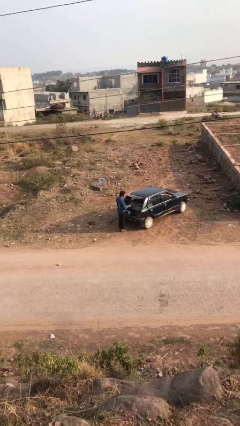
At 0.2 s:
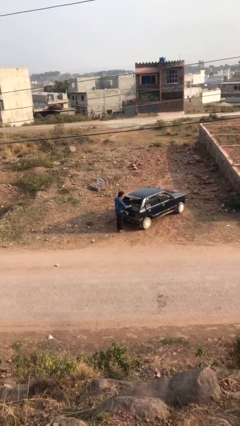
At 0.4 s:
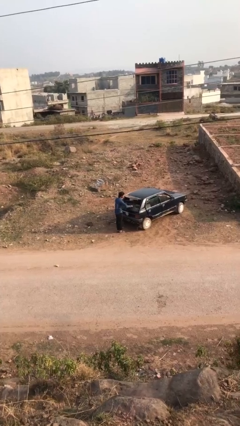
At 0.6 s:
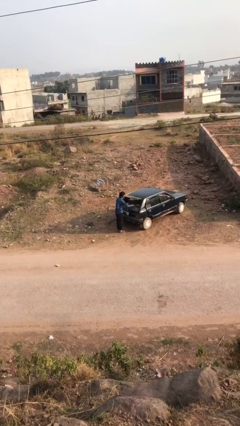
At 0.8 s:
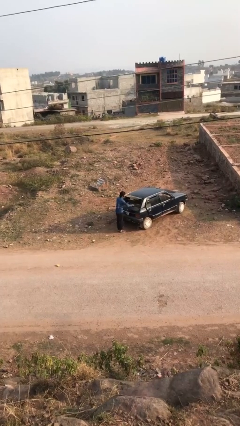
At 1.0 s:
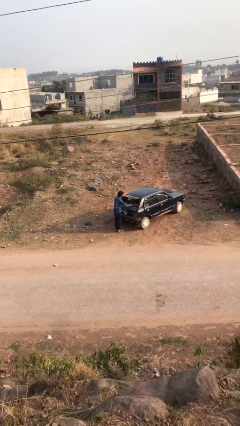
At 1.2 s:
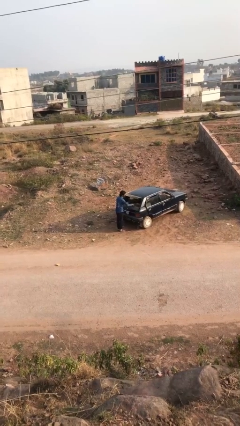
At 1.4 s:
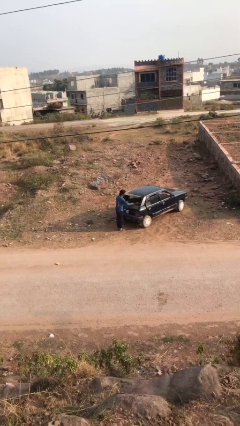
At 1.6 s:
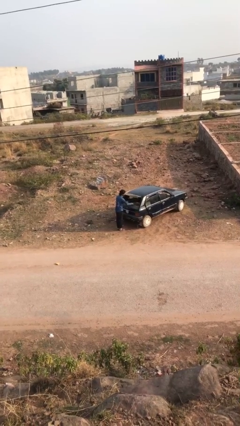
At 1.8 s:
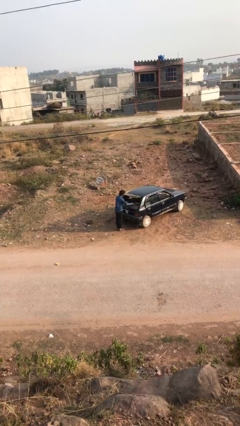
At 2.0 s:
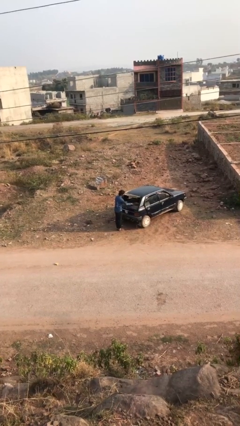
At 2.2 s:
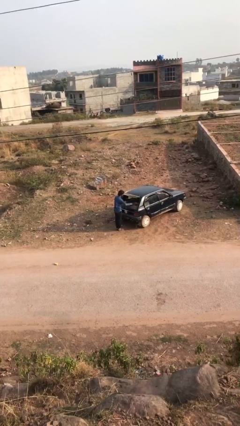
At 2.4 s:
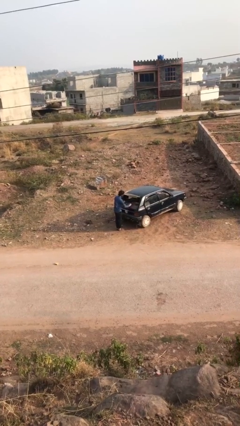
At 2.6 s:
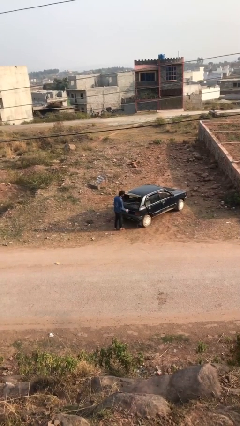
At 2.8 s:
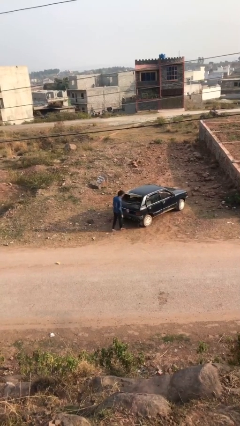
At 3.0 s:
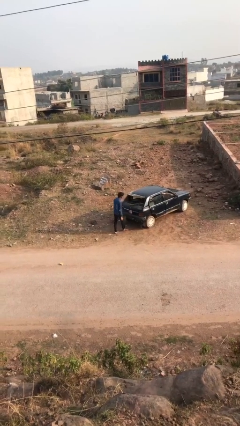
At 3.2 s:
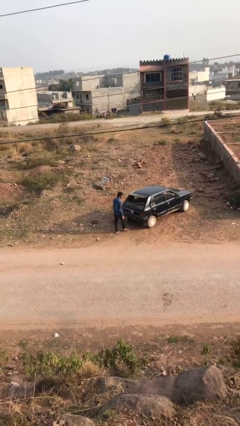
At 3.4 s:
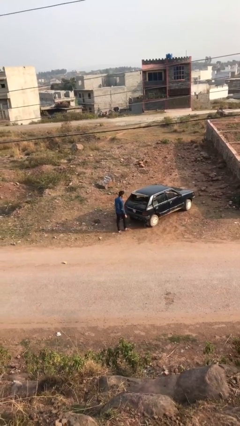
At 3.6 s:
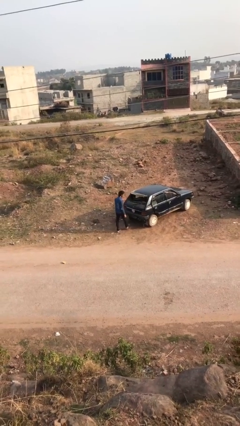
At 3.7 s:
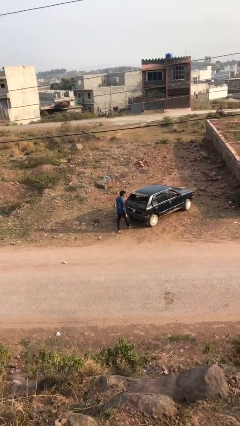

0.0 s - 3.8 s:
person loads car

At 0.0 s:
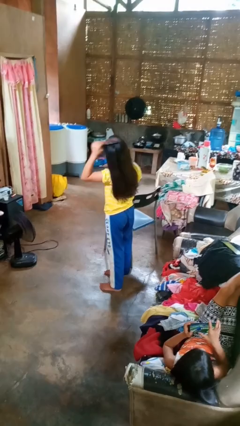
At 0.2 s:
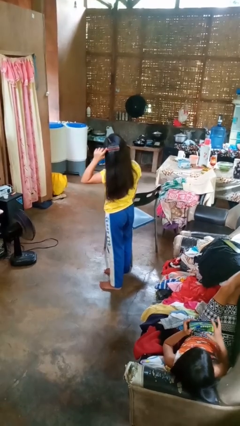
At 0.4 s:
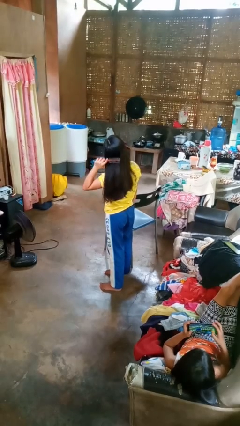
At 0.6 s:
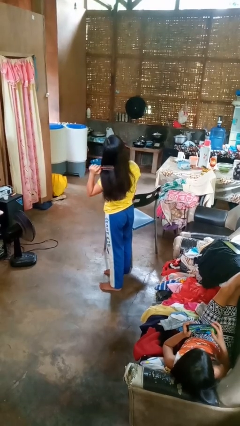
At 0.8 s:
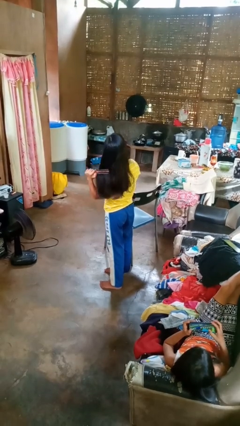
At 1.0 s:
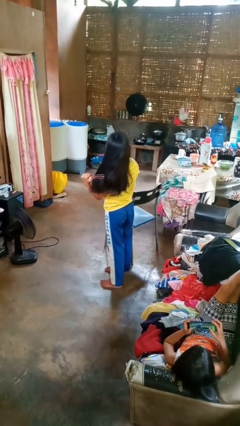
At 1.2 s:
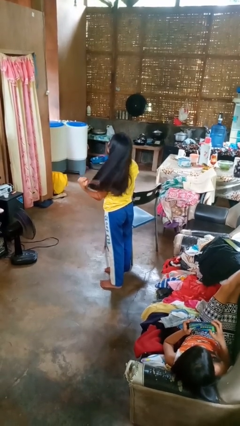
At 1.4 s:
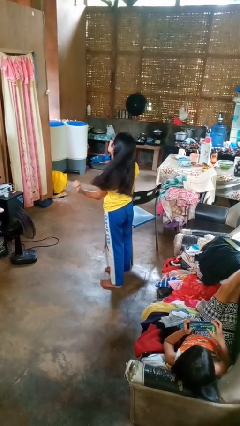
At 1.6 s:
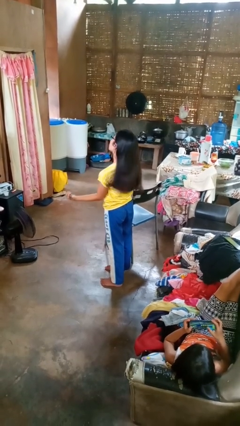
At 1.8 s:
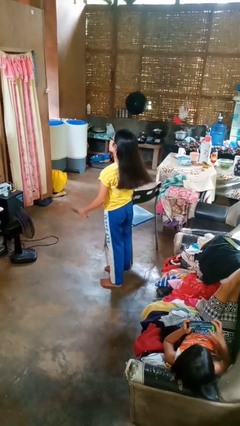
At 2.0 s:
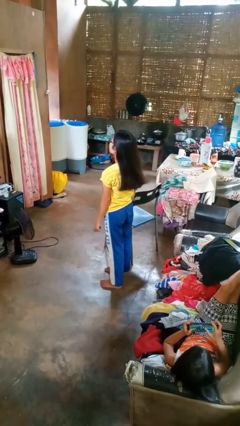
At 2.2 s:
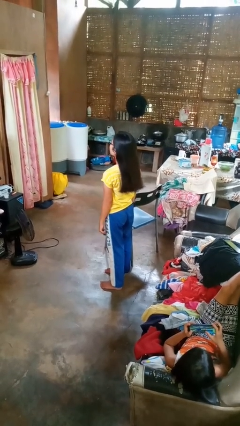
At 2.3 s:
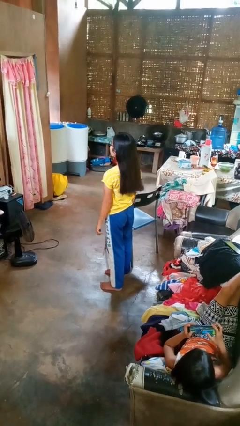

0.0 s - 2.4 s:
person brushes hair

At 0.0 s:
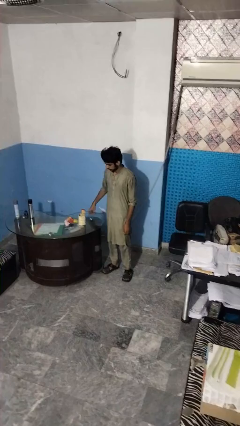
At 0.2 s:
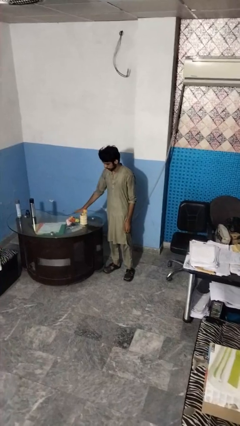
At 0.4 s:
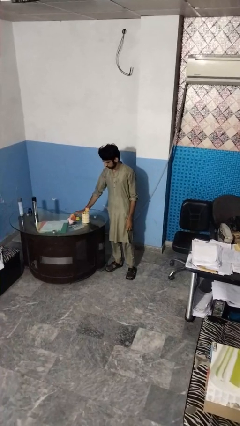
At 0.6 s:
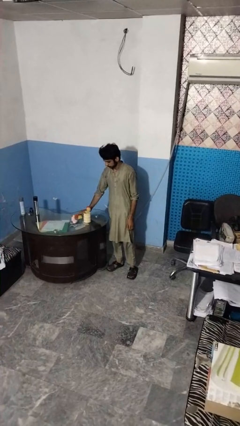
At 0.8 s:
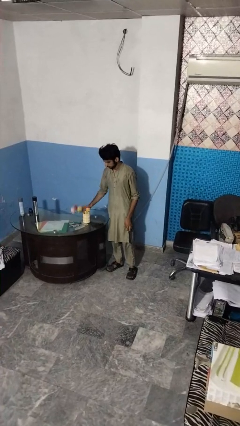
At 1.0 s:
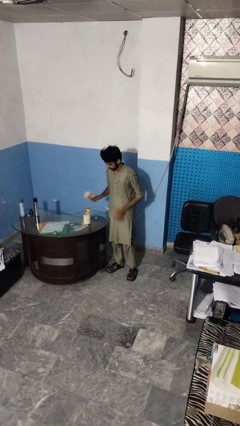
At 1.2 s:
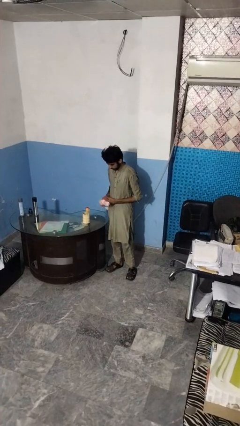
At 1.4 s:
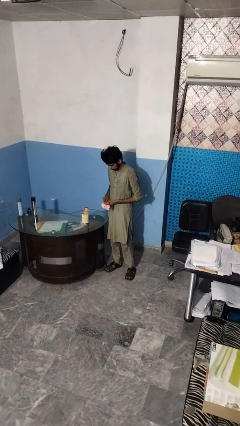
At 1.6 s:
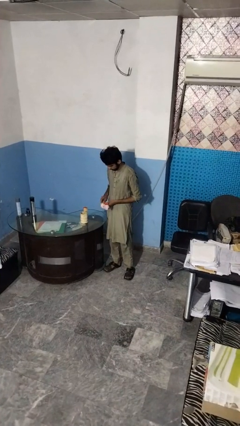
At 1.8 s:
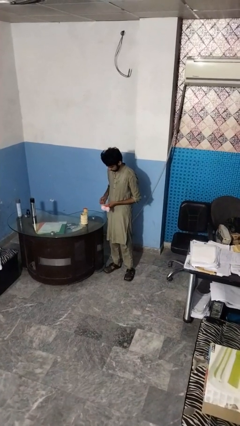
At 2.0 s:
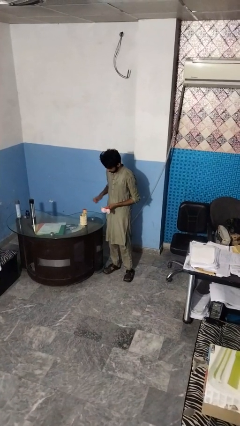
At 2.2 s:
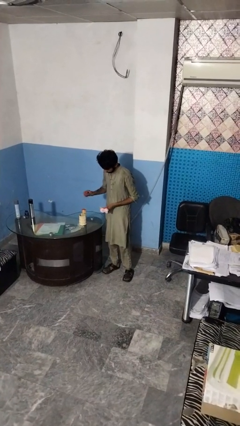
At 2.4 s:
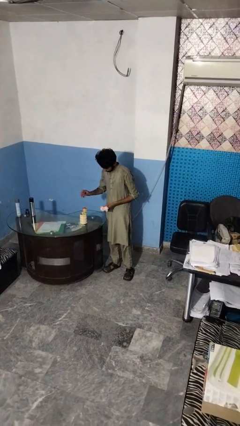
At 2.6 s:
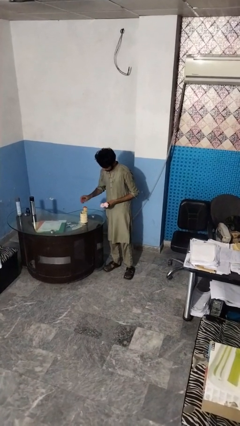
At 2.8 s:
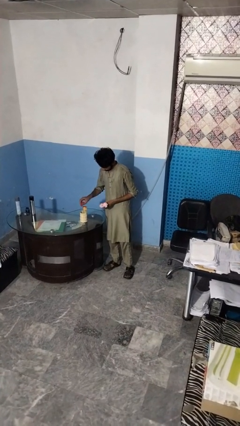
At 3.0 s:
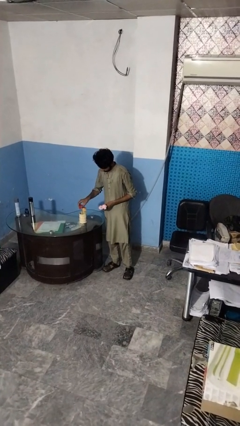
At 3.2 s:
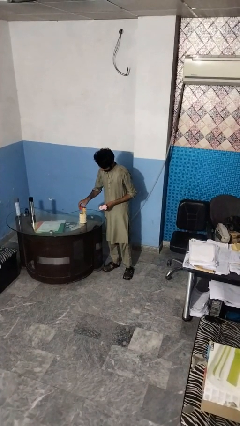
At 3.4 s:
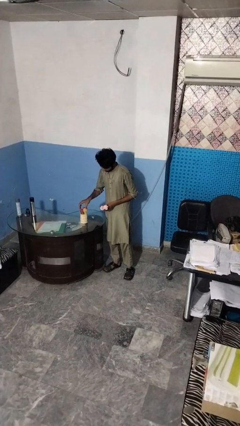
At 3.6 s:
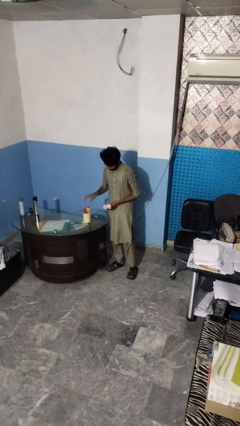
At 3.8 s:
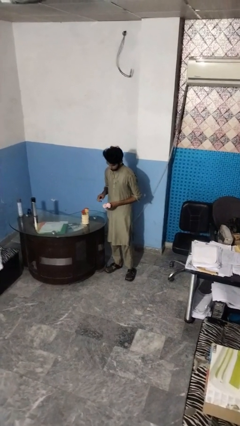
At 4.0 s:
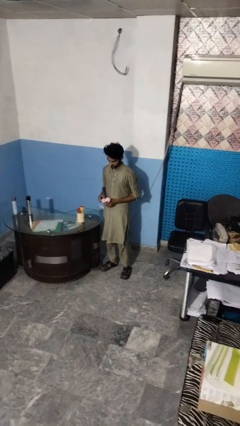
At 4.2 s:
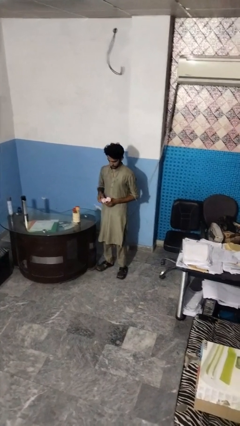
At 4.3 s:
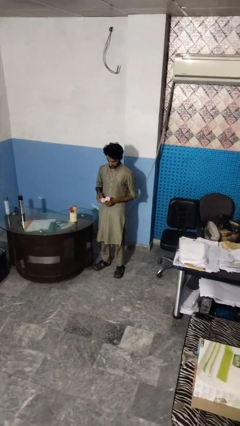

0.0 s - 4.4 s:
person arranges flowers in vase

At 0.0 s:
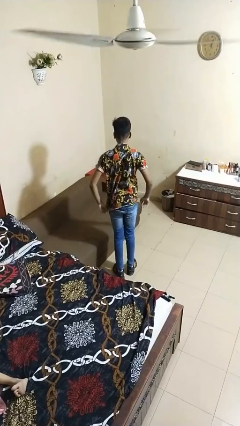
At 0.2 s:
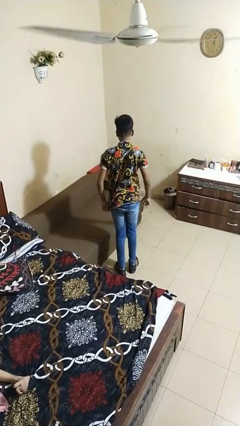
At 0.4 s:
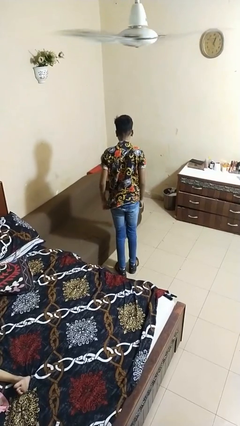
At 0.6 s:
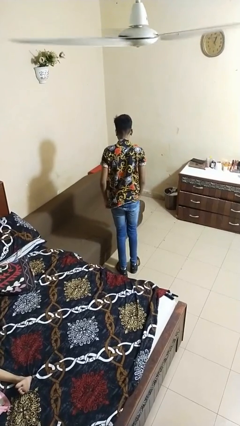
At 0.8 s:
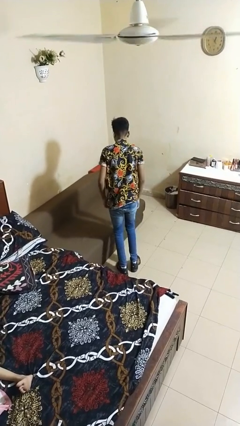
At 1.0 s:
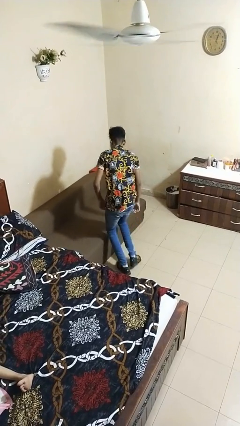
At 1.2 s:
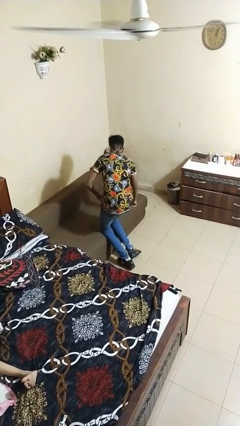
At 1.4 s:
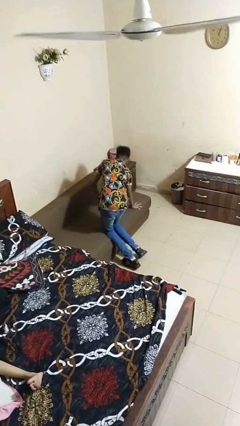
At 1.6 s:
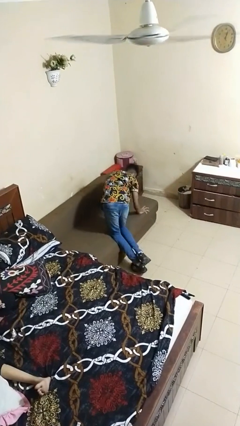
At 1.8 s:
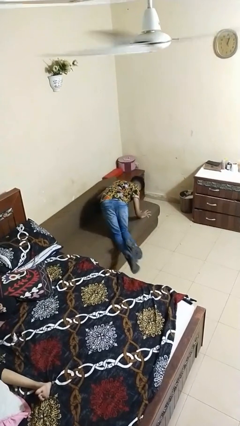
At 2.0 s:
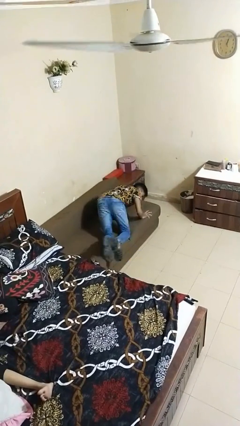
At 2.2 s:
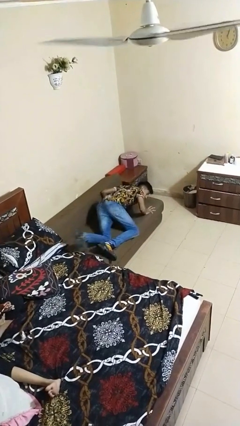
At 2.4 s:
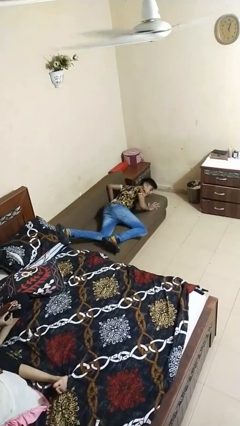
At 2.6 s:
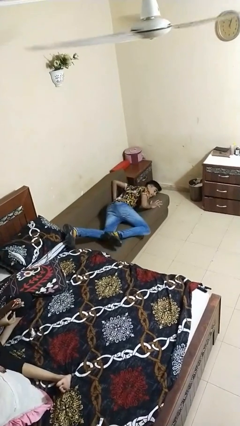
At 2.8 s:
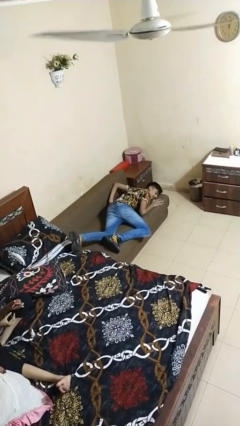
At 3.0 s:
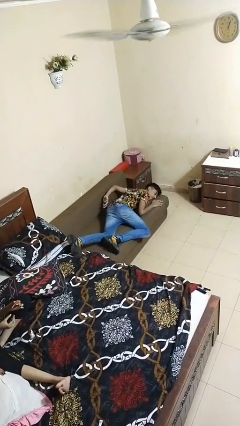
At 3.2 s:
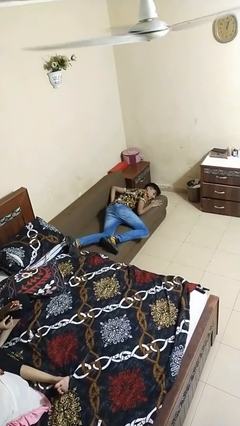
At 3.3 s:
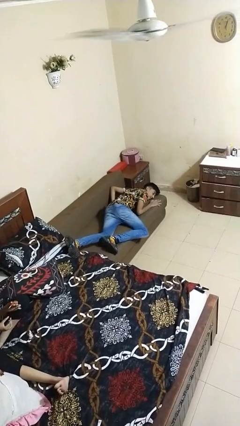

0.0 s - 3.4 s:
person lies down on bed

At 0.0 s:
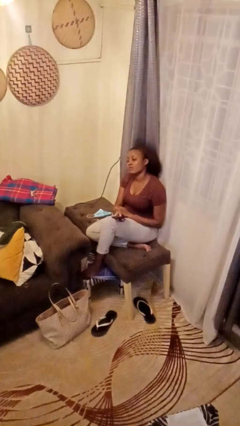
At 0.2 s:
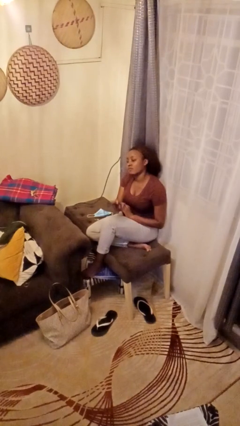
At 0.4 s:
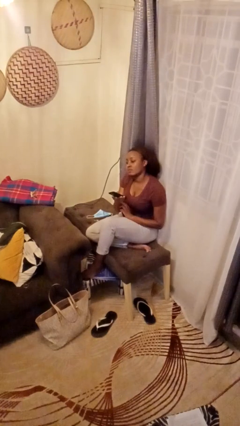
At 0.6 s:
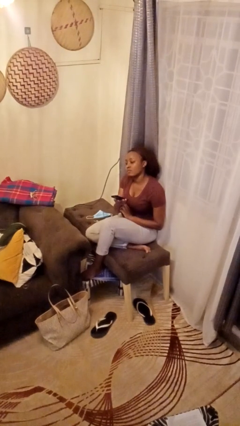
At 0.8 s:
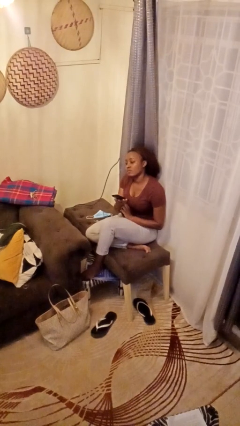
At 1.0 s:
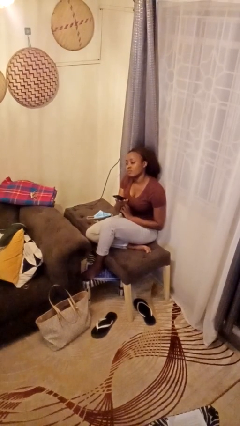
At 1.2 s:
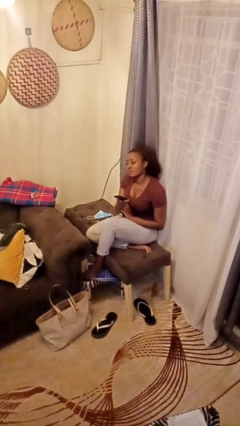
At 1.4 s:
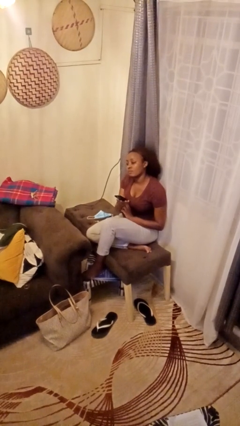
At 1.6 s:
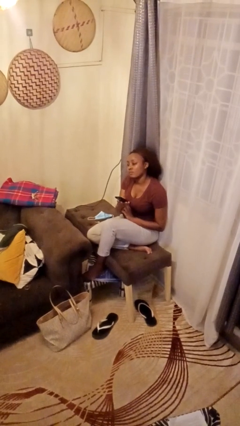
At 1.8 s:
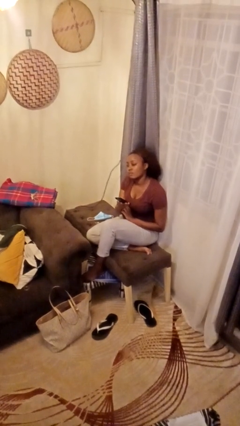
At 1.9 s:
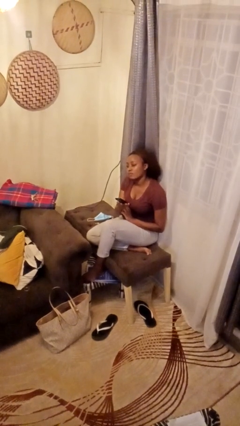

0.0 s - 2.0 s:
person uses television remote

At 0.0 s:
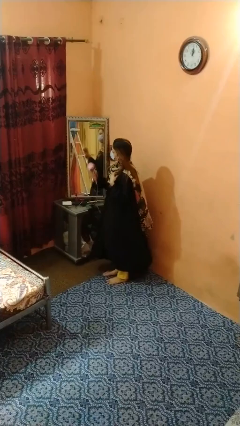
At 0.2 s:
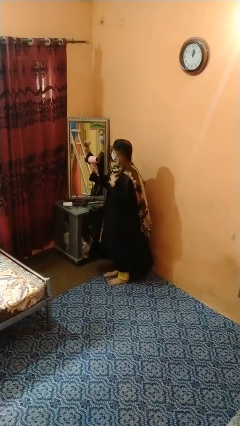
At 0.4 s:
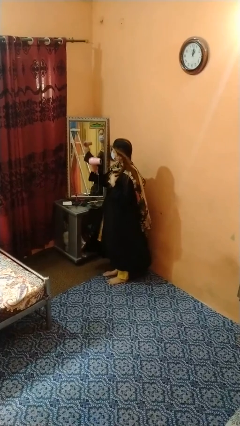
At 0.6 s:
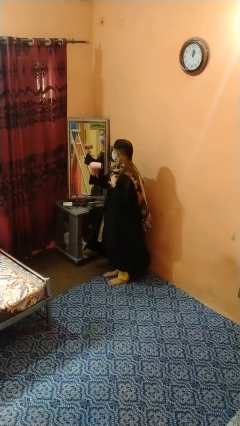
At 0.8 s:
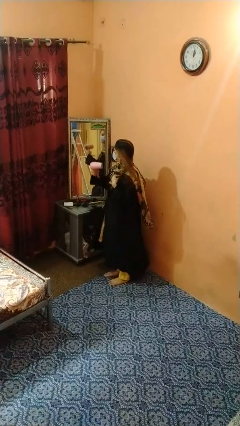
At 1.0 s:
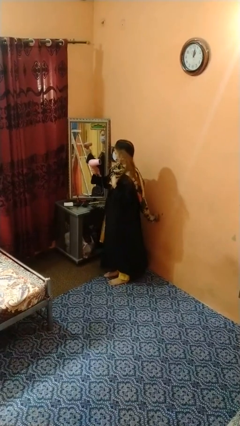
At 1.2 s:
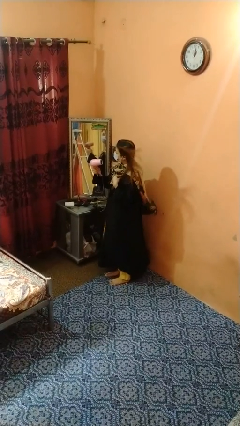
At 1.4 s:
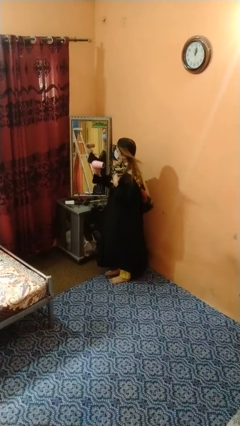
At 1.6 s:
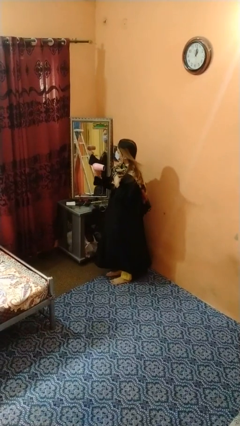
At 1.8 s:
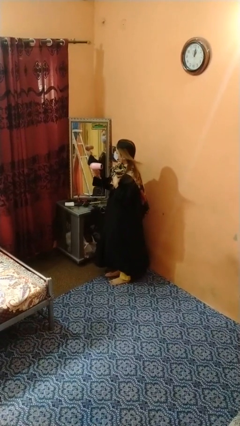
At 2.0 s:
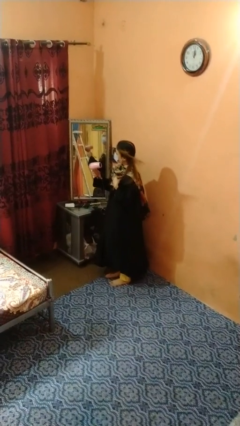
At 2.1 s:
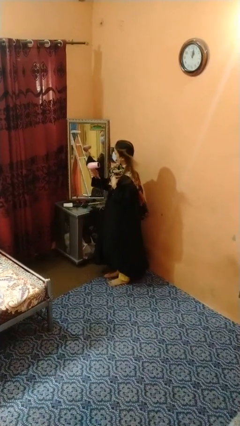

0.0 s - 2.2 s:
person dries hair with hairdryer
